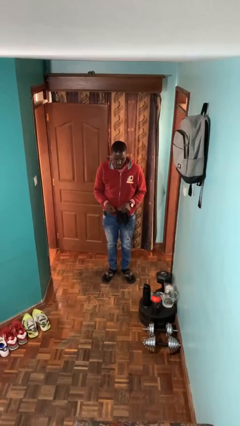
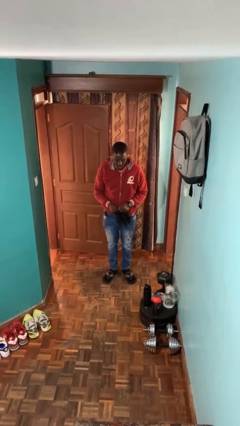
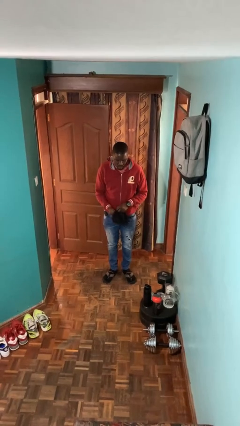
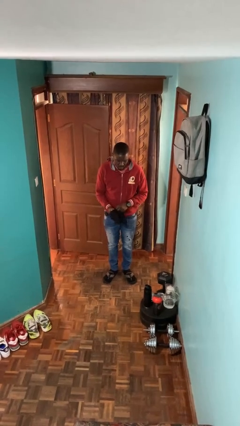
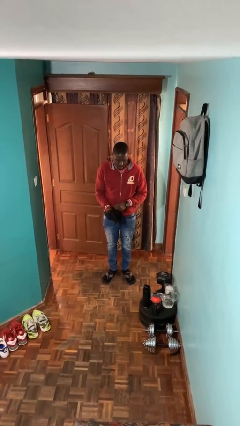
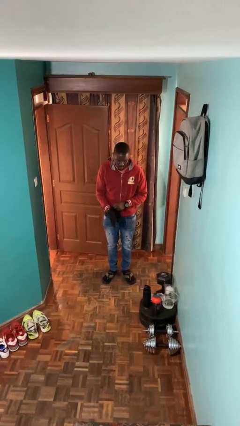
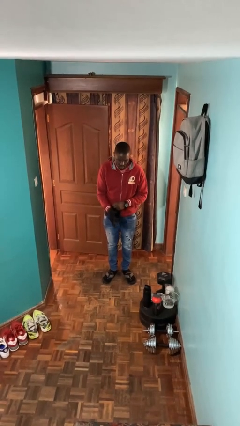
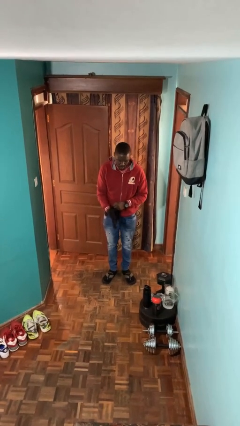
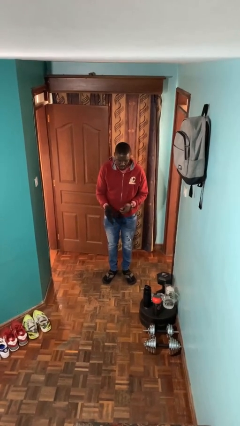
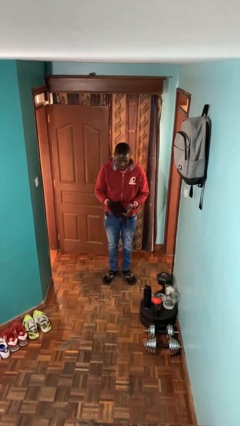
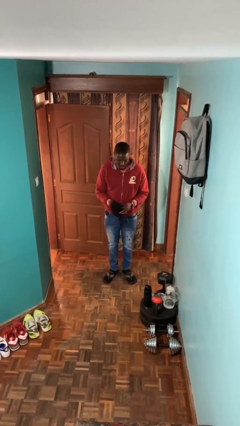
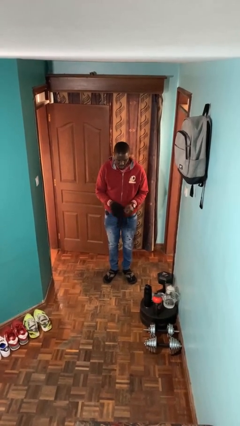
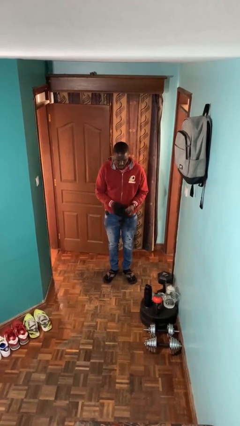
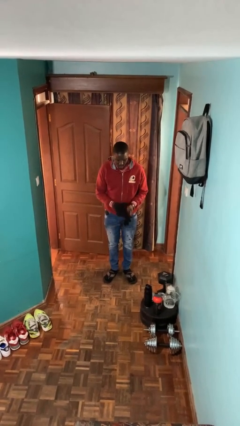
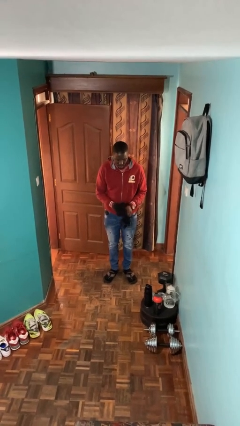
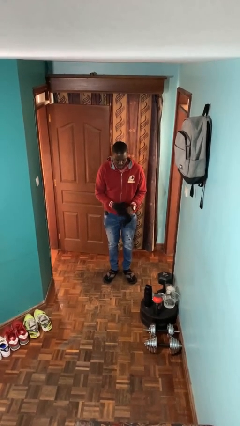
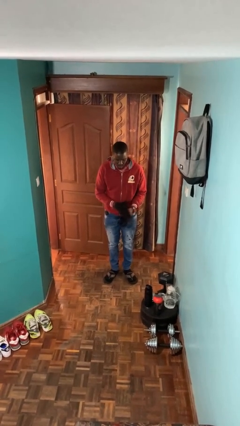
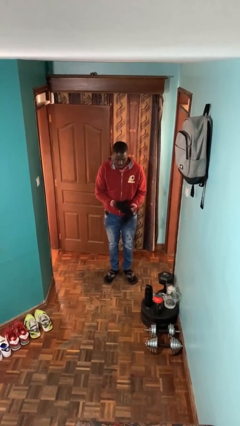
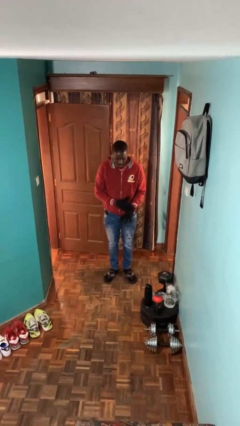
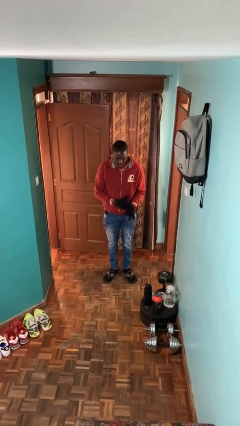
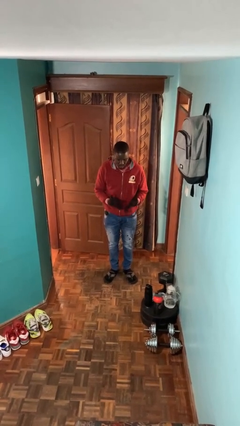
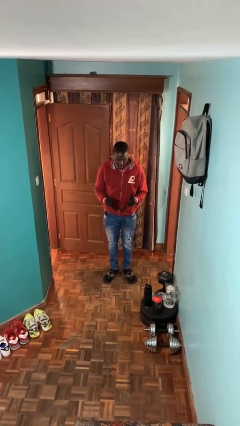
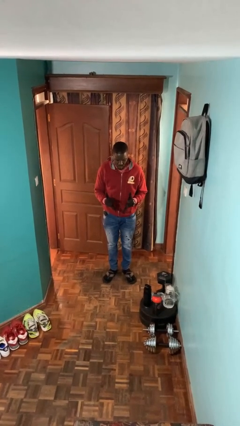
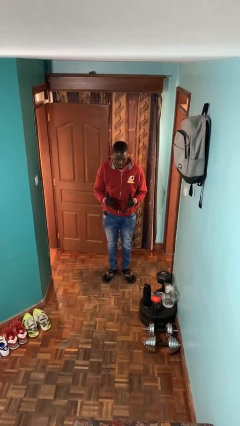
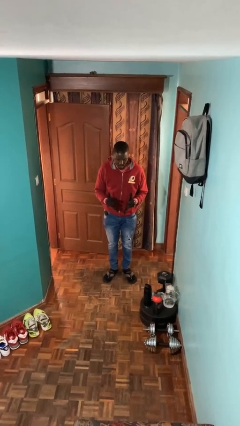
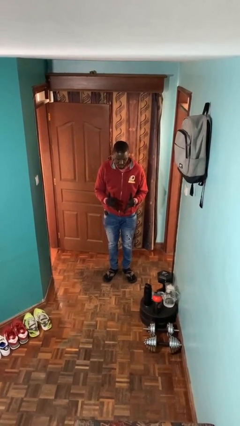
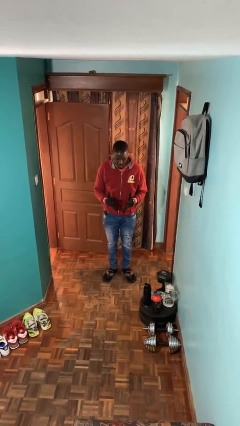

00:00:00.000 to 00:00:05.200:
person puts on gloves

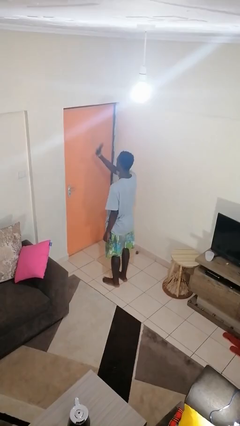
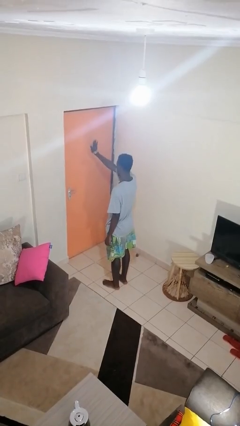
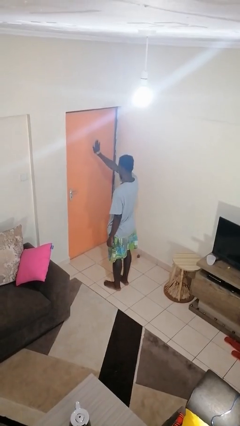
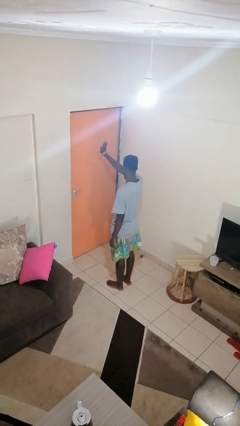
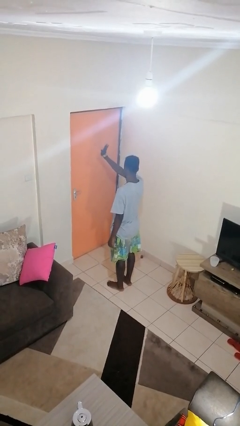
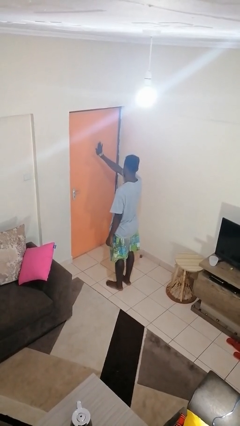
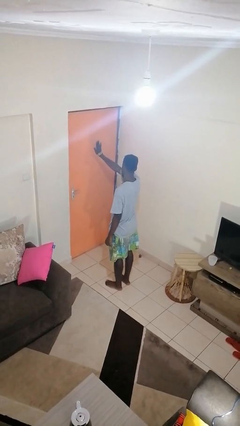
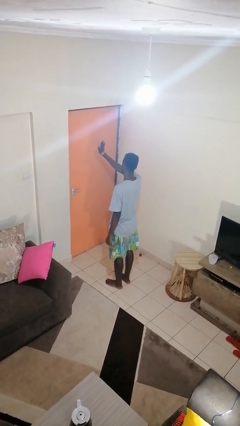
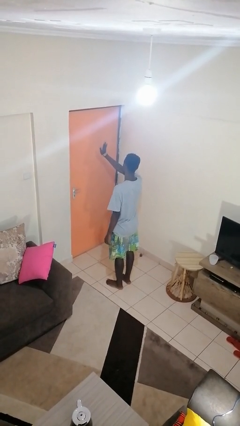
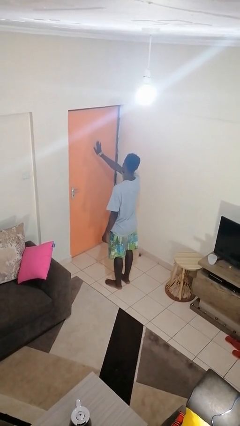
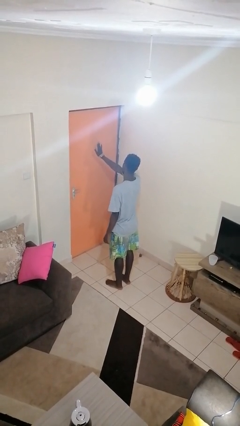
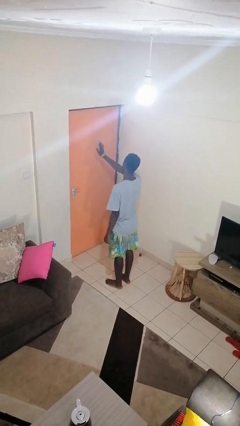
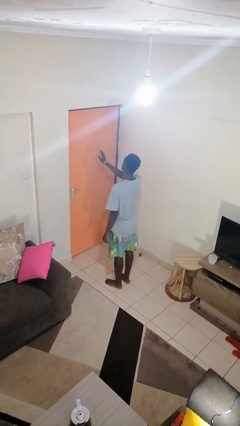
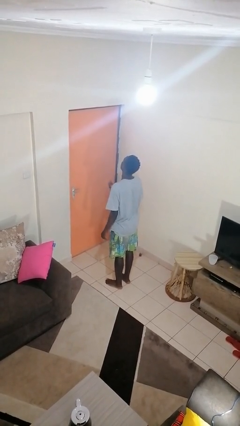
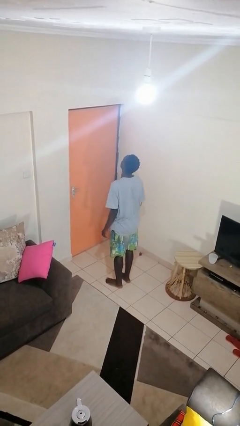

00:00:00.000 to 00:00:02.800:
person gestures stop

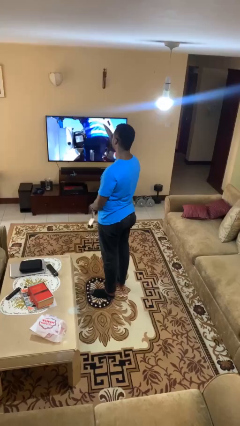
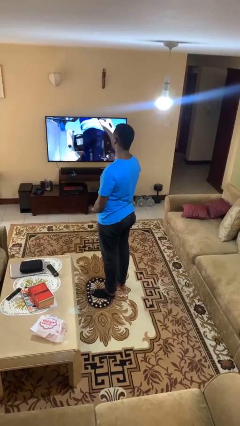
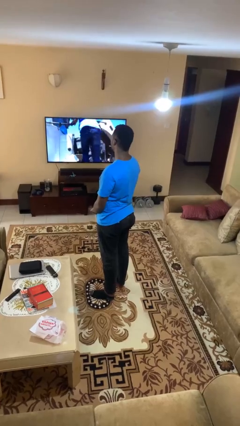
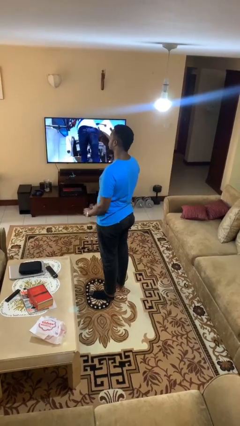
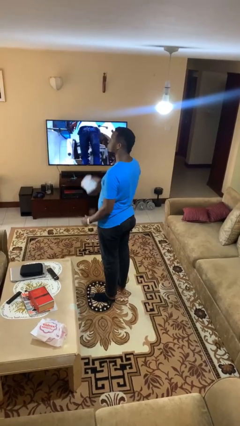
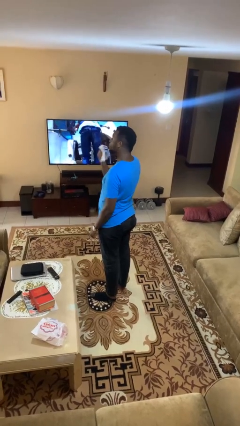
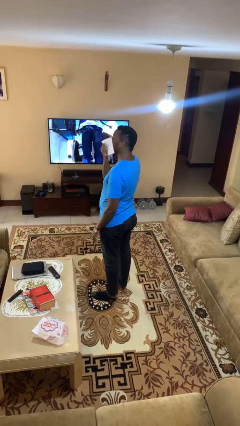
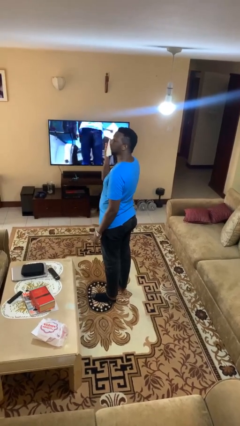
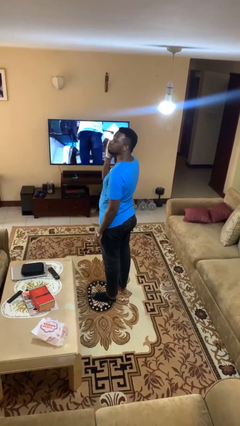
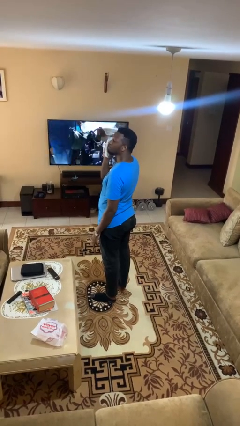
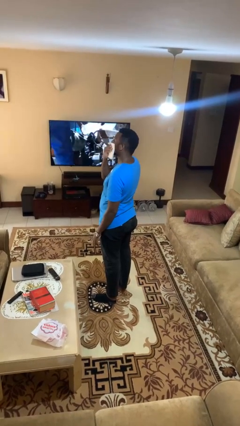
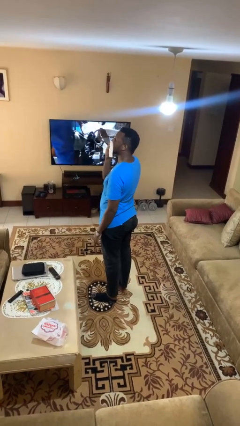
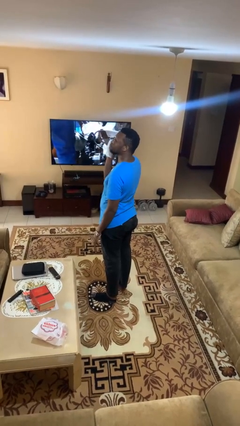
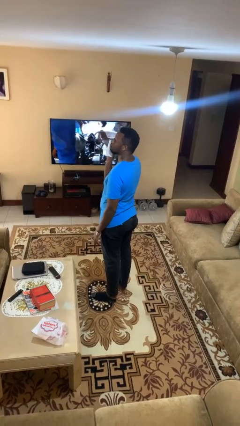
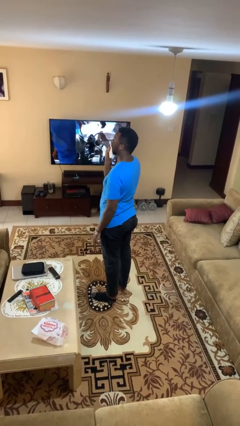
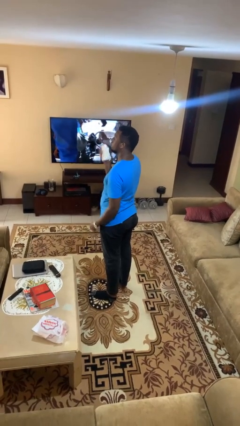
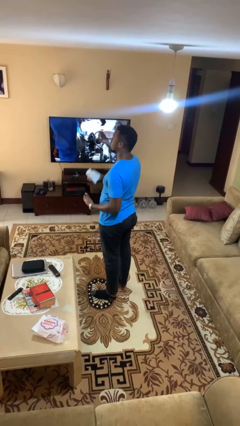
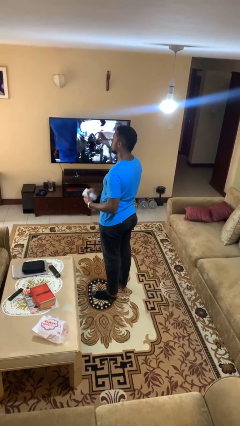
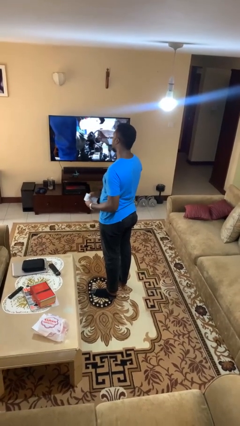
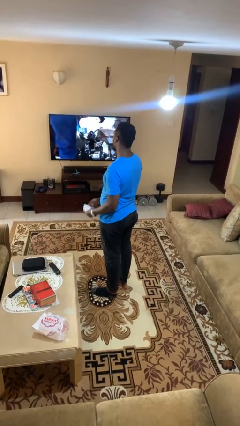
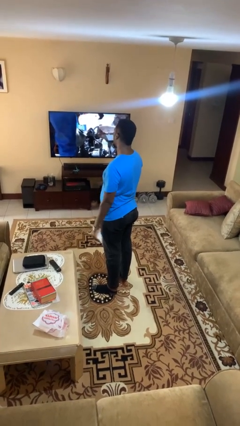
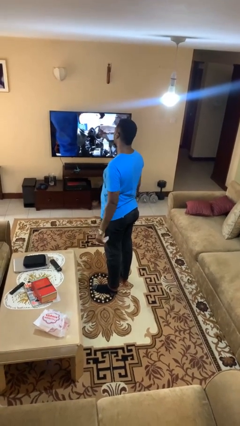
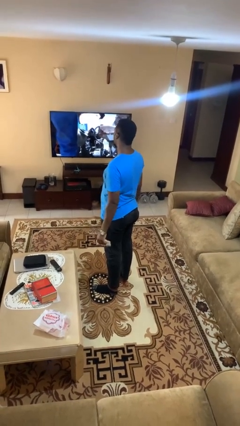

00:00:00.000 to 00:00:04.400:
person wipes mouth with napkin

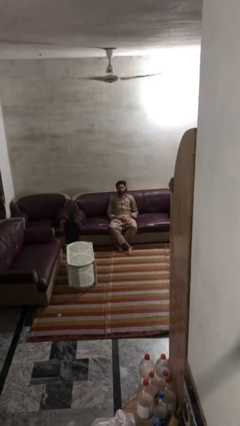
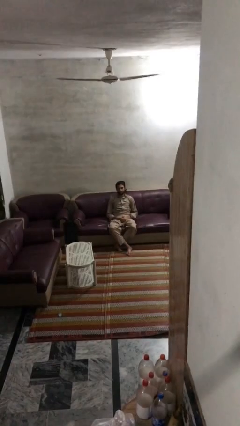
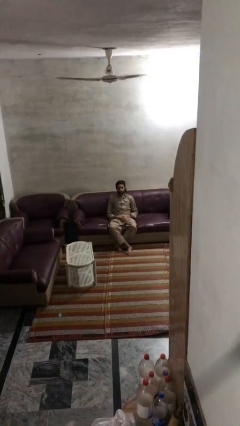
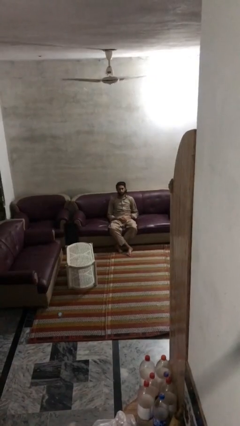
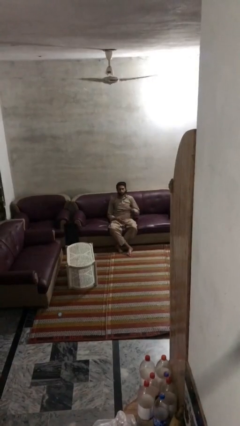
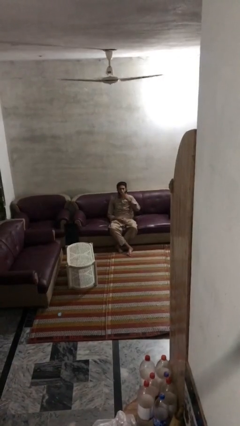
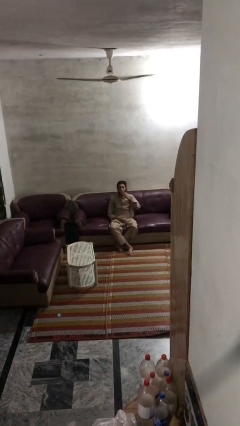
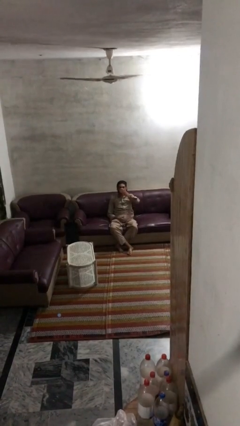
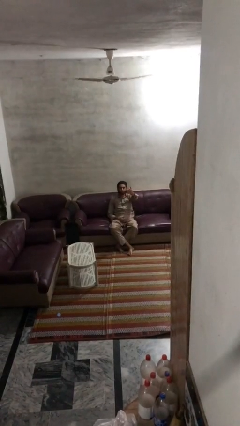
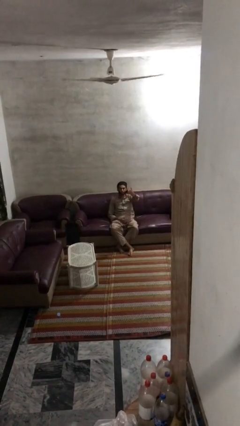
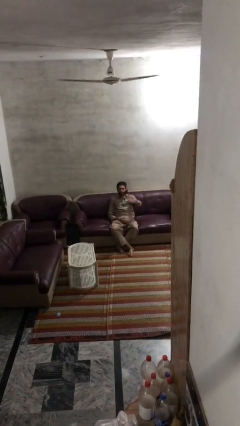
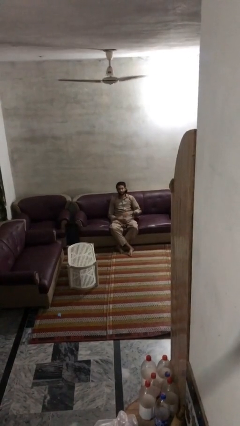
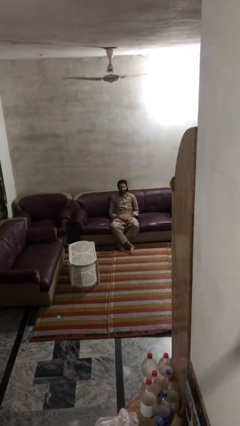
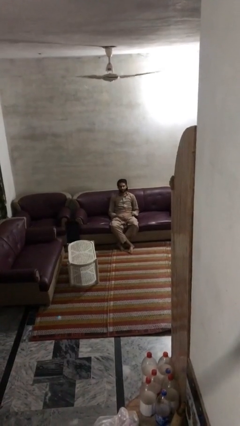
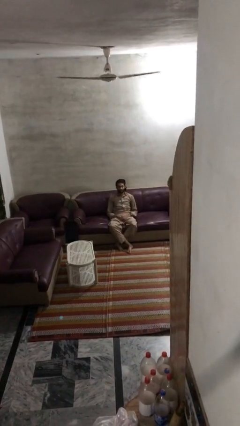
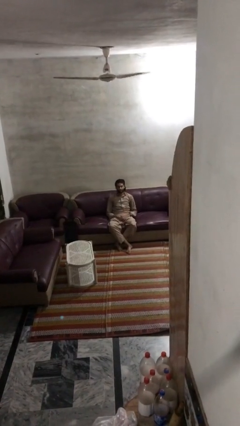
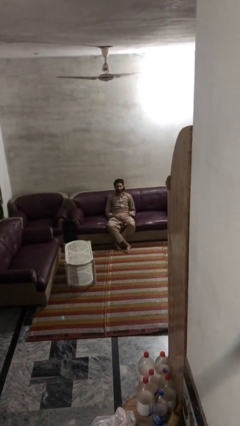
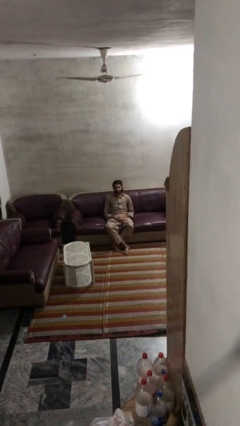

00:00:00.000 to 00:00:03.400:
person gestures blow kiss

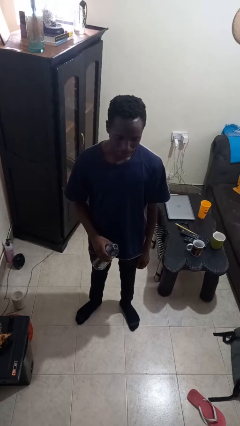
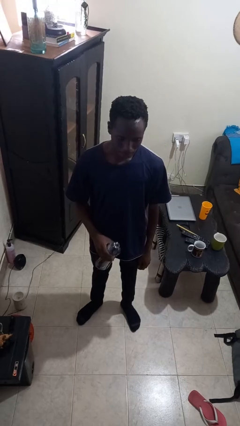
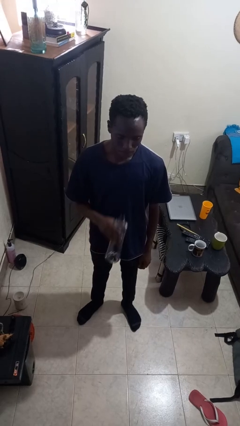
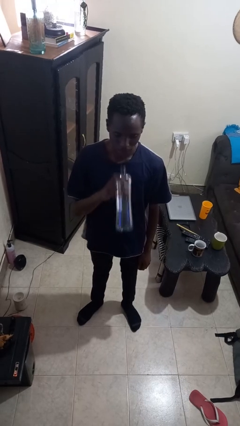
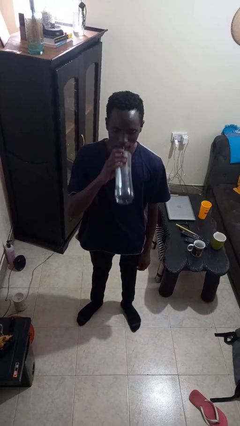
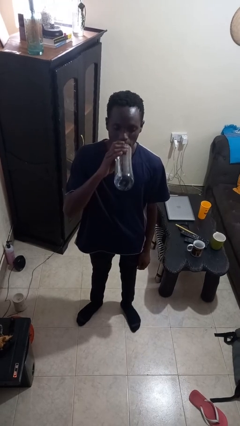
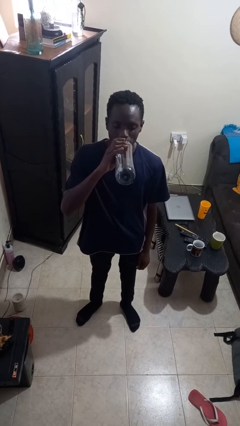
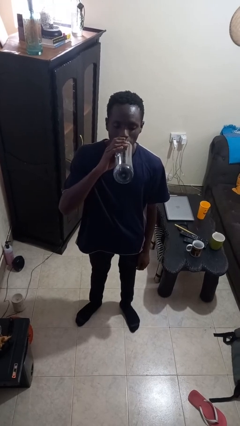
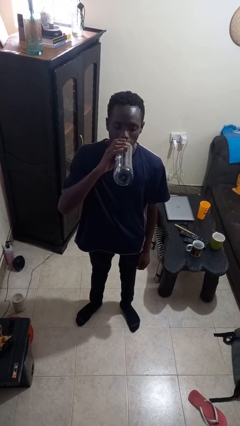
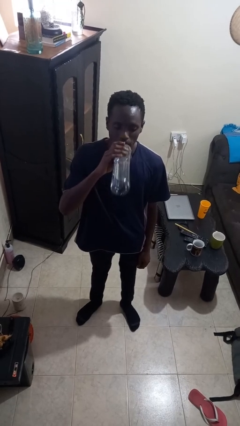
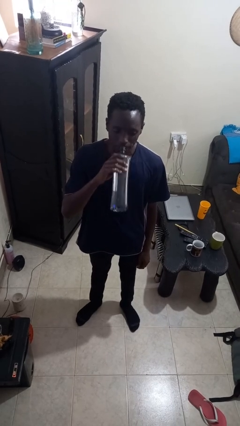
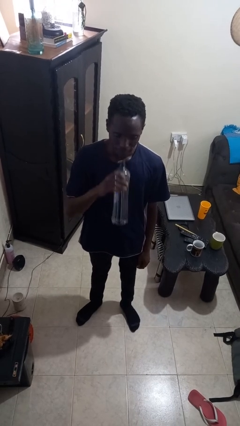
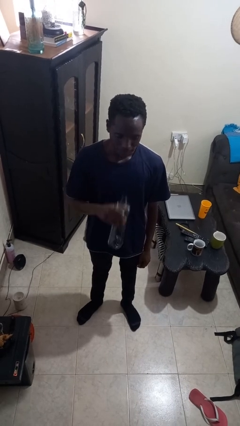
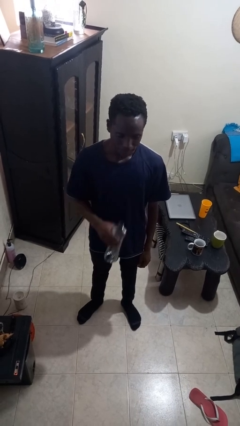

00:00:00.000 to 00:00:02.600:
person drinks from bottle
